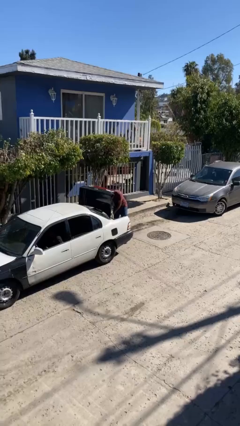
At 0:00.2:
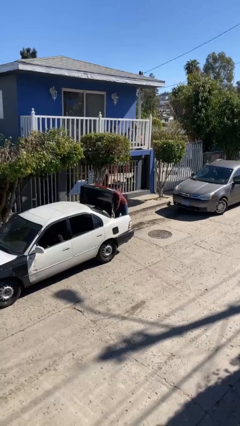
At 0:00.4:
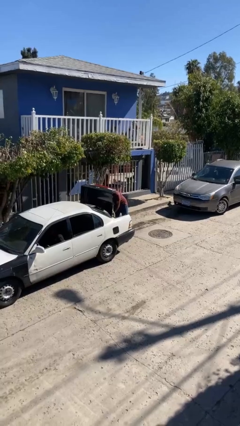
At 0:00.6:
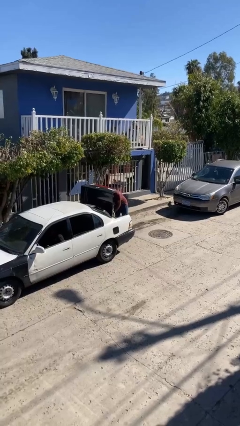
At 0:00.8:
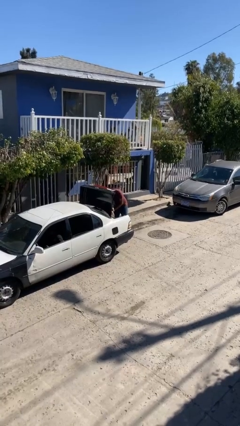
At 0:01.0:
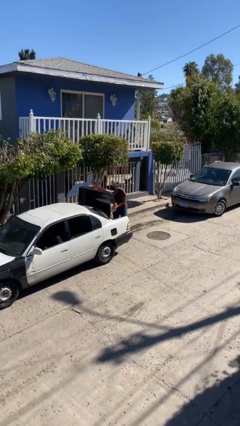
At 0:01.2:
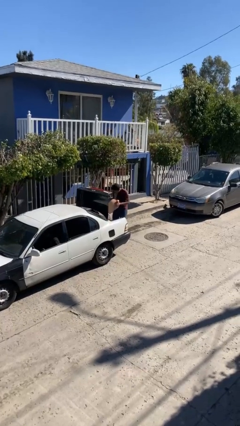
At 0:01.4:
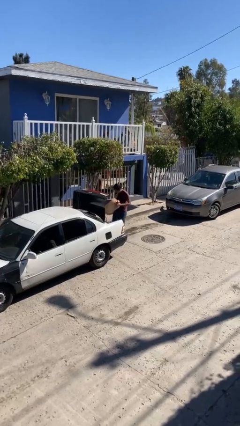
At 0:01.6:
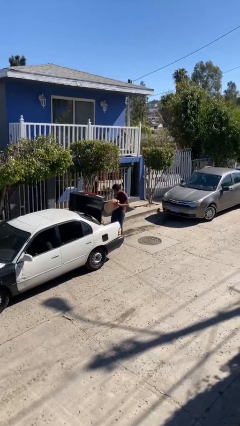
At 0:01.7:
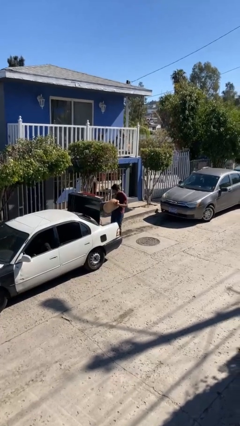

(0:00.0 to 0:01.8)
person unloads car

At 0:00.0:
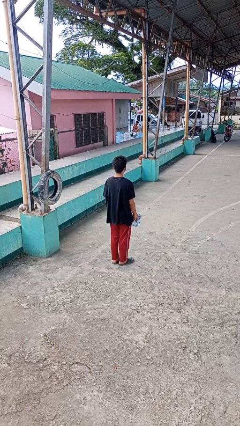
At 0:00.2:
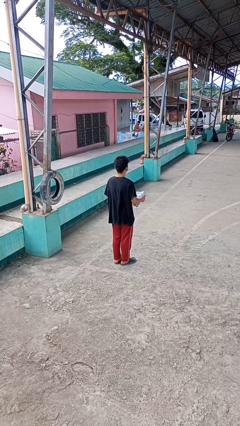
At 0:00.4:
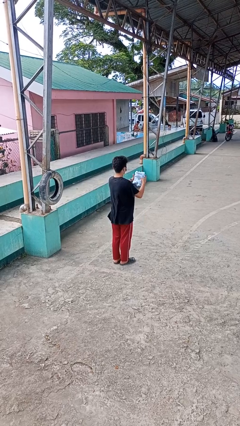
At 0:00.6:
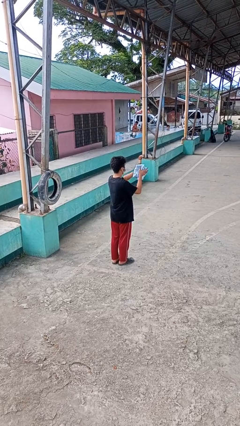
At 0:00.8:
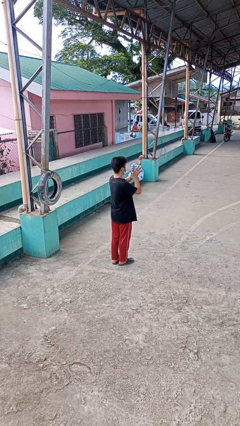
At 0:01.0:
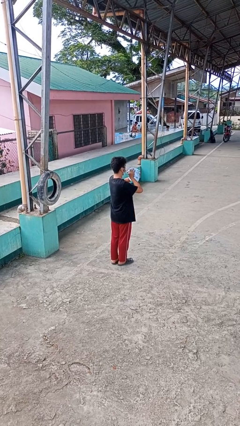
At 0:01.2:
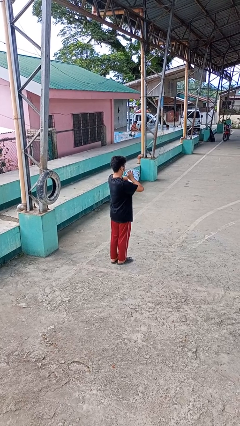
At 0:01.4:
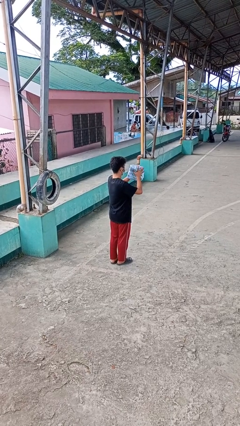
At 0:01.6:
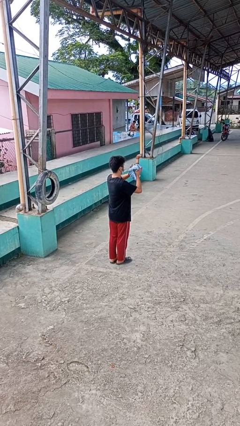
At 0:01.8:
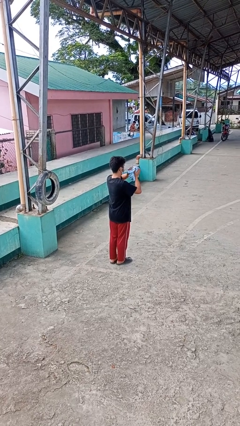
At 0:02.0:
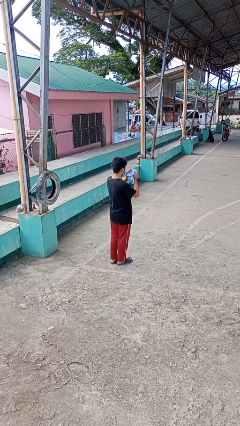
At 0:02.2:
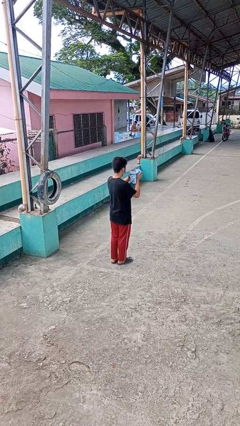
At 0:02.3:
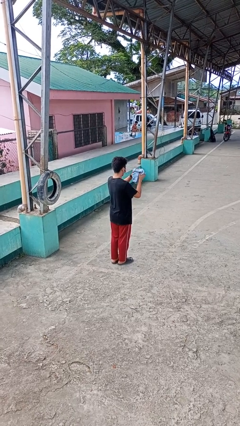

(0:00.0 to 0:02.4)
person squeezes object

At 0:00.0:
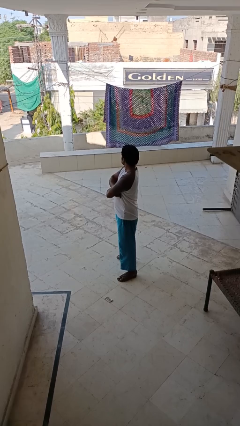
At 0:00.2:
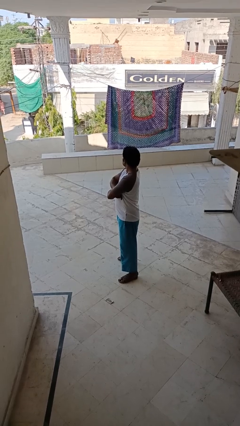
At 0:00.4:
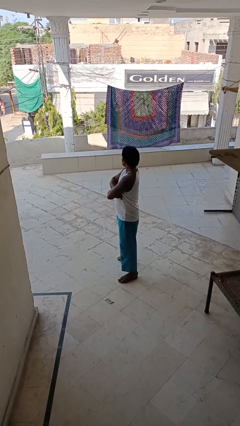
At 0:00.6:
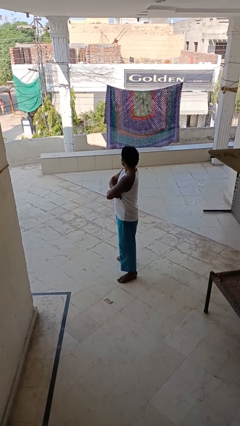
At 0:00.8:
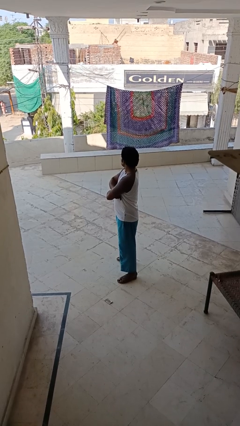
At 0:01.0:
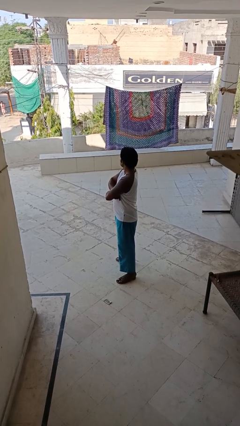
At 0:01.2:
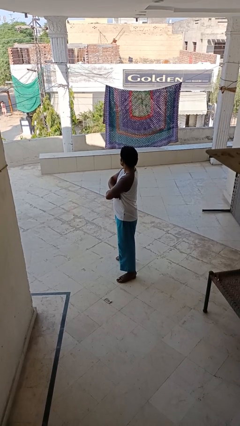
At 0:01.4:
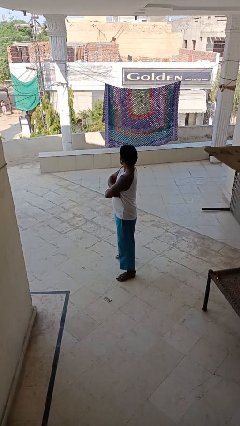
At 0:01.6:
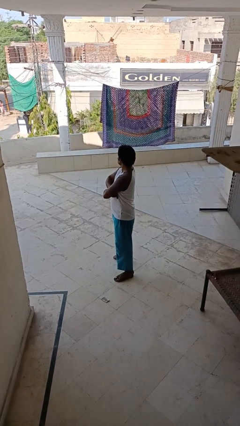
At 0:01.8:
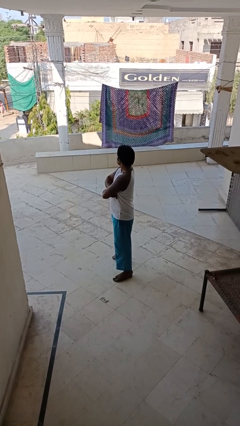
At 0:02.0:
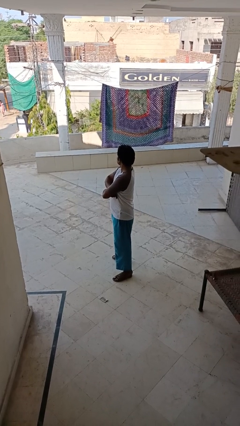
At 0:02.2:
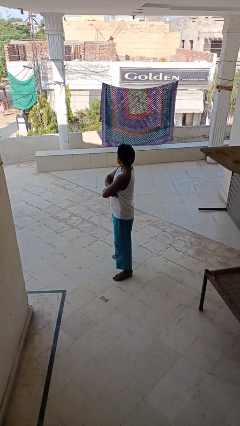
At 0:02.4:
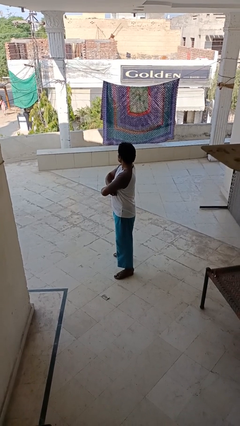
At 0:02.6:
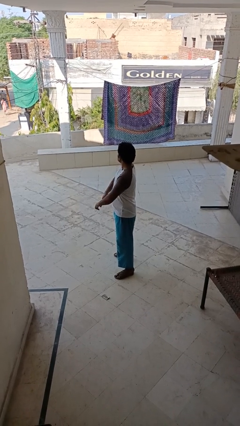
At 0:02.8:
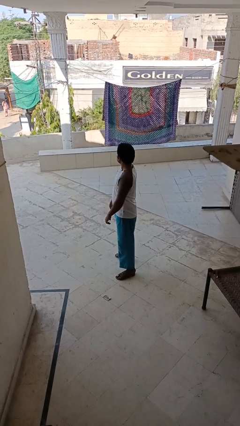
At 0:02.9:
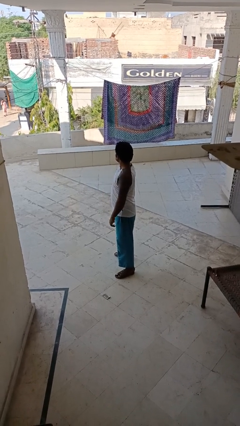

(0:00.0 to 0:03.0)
person crosses arms

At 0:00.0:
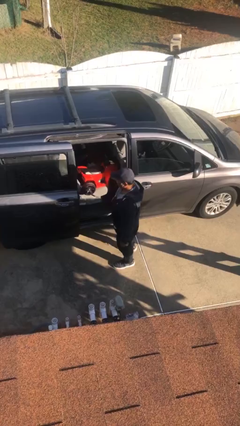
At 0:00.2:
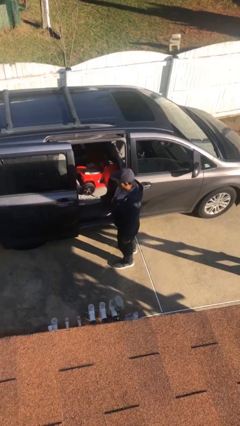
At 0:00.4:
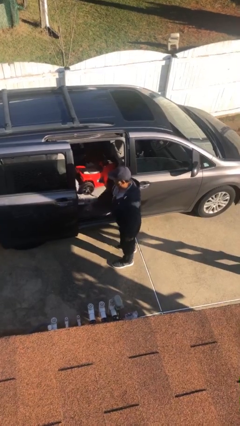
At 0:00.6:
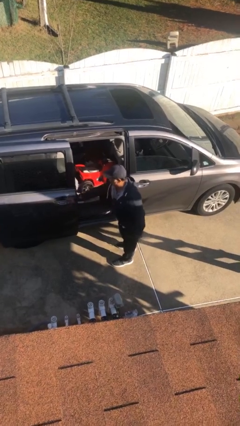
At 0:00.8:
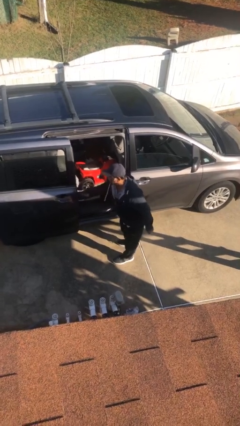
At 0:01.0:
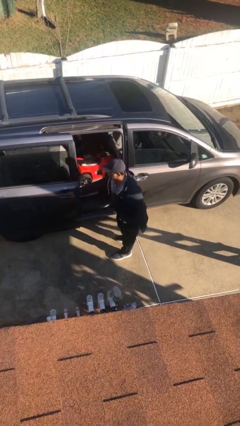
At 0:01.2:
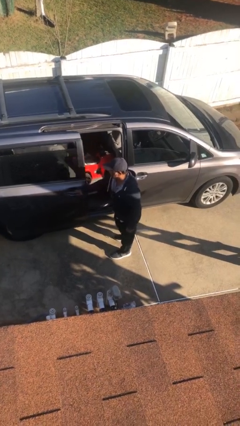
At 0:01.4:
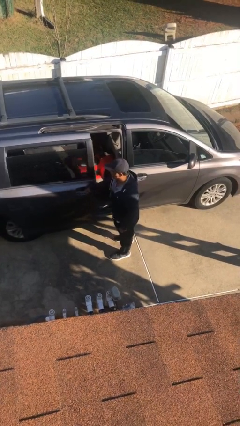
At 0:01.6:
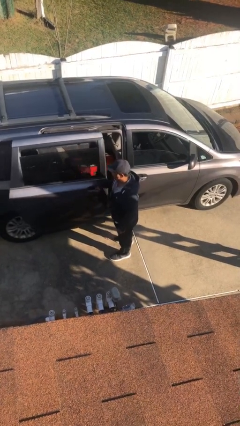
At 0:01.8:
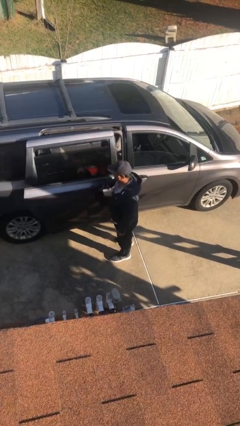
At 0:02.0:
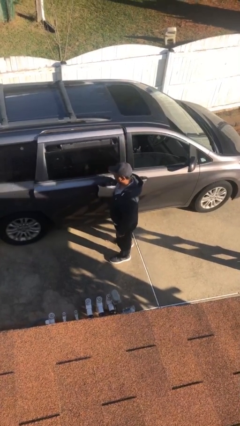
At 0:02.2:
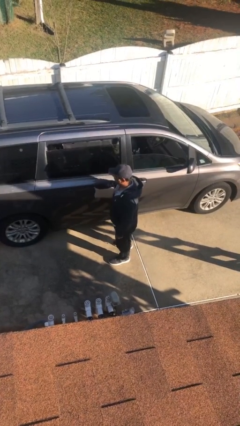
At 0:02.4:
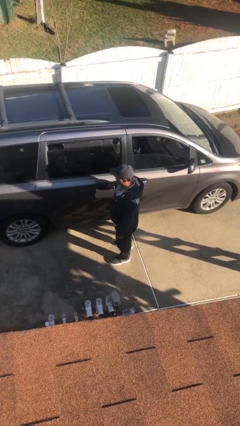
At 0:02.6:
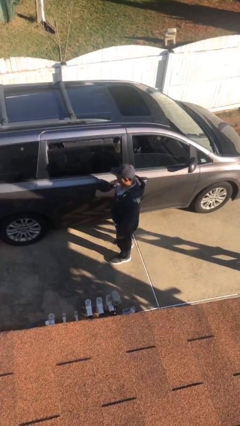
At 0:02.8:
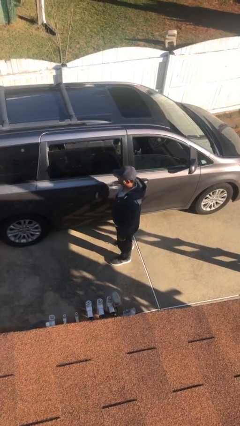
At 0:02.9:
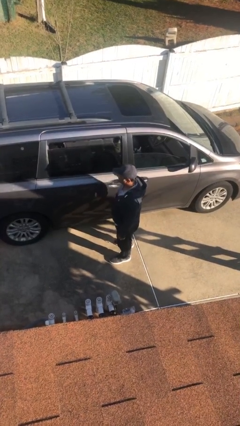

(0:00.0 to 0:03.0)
person closes car door

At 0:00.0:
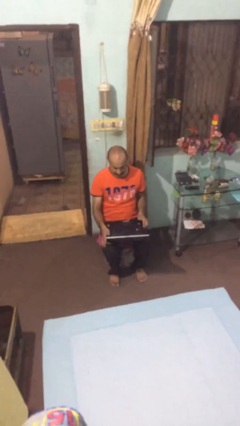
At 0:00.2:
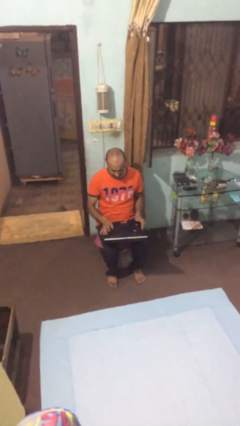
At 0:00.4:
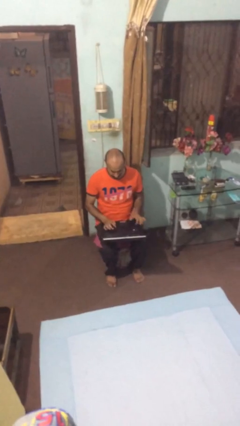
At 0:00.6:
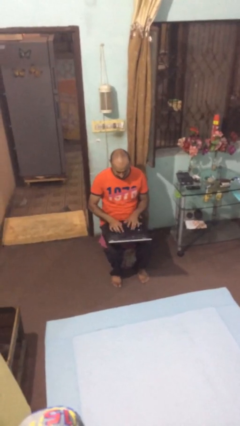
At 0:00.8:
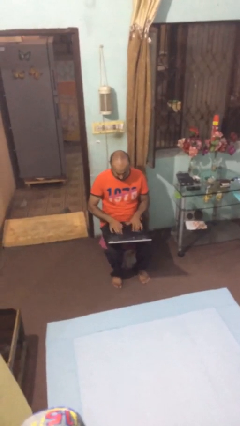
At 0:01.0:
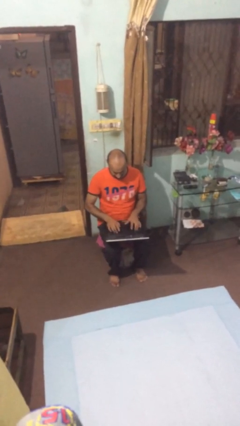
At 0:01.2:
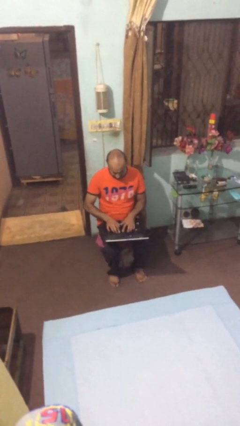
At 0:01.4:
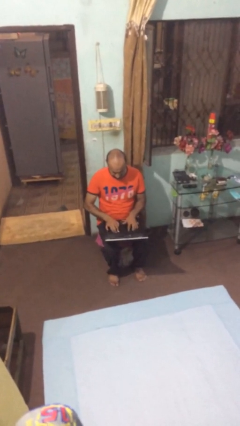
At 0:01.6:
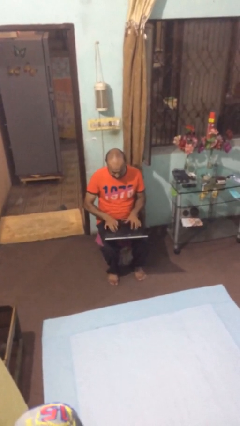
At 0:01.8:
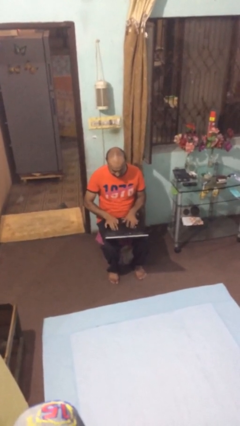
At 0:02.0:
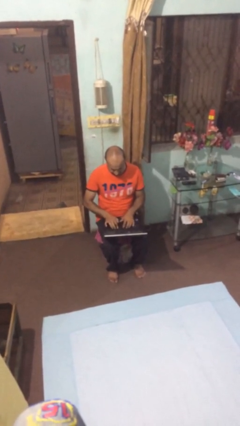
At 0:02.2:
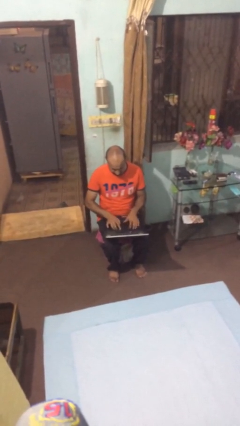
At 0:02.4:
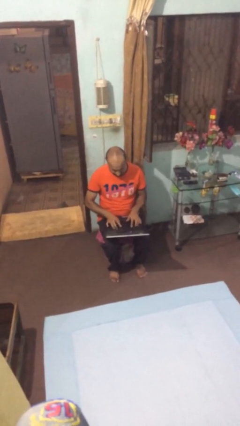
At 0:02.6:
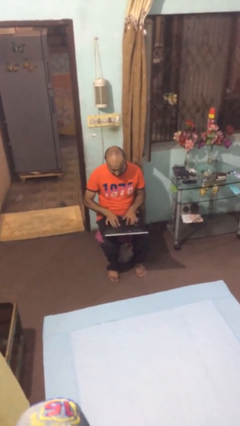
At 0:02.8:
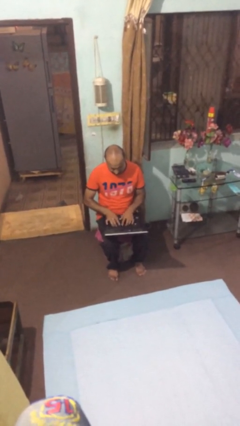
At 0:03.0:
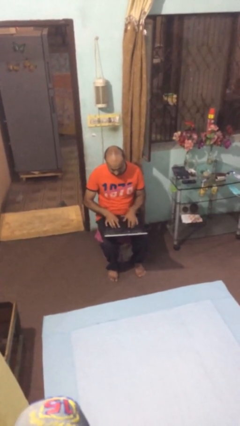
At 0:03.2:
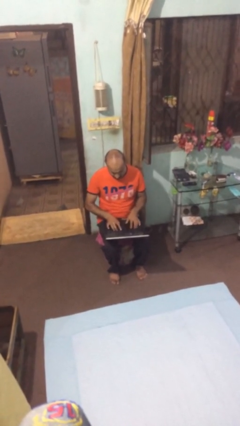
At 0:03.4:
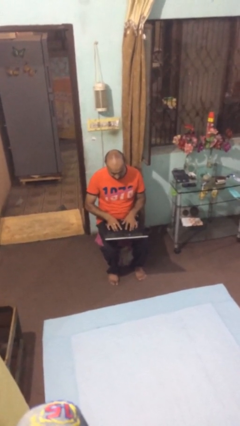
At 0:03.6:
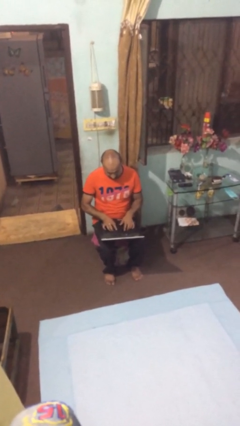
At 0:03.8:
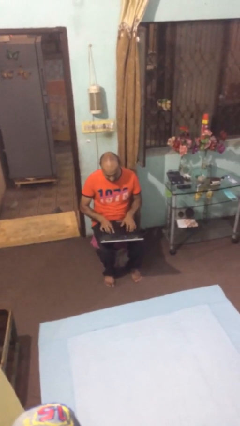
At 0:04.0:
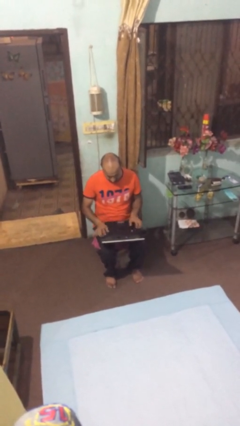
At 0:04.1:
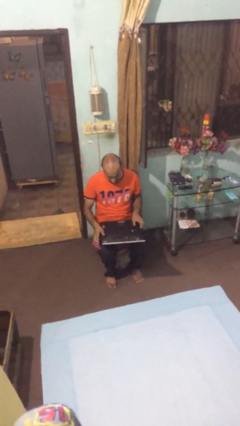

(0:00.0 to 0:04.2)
person interacts with laptop

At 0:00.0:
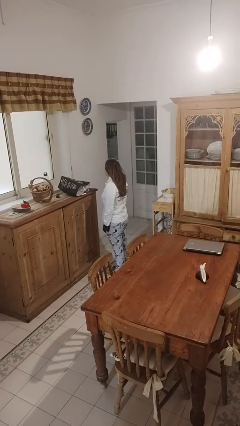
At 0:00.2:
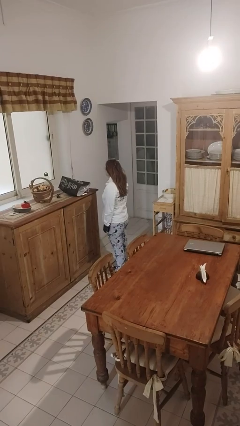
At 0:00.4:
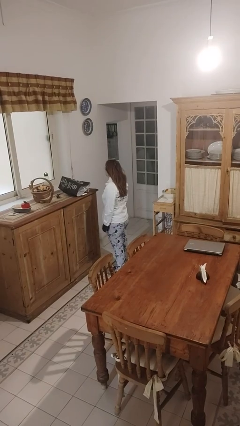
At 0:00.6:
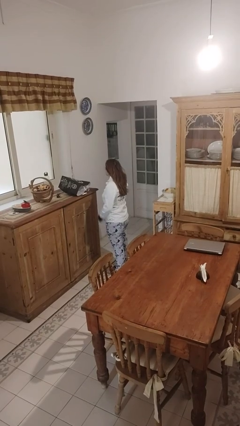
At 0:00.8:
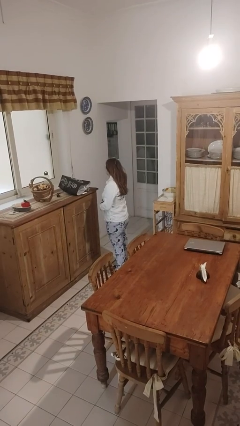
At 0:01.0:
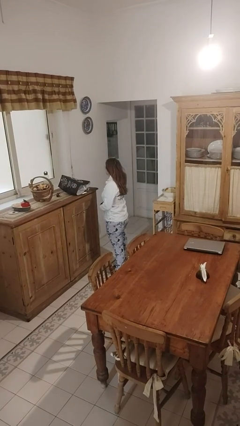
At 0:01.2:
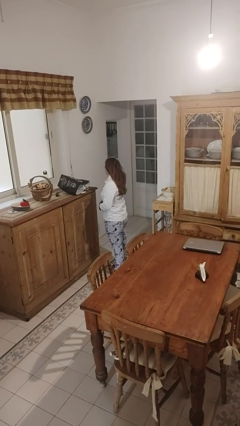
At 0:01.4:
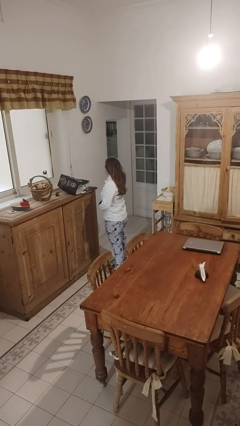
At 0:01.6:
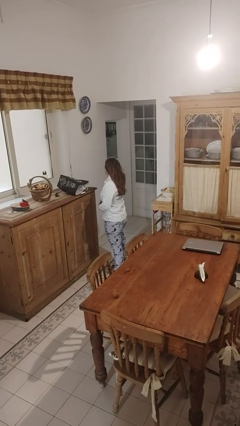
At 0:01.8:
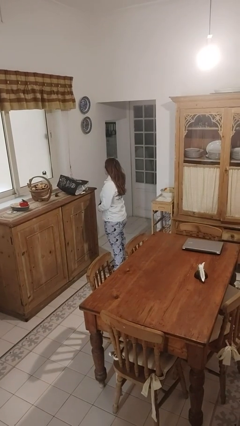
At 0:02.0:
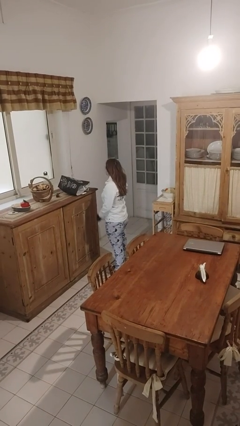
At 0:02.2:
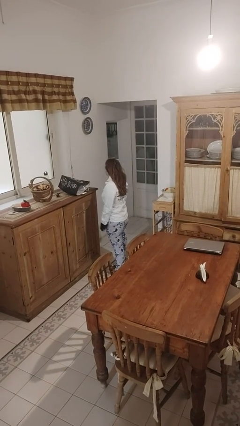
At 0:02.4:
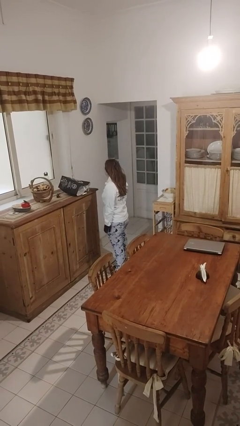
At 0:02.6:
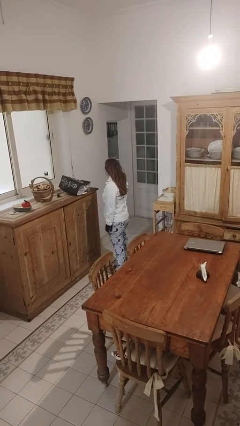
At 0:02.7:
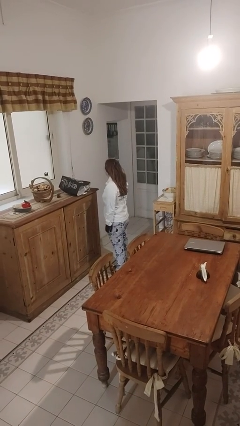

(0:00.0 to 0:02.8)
person unbuttons shirt

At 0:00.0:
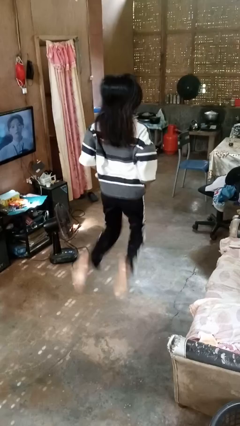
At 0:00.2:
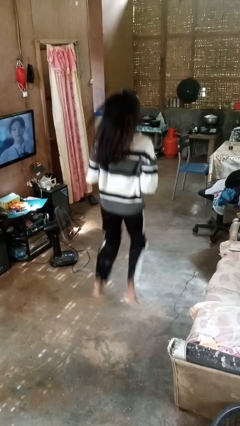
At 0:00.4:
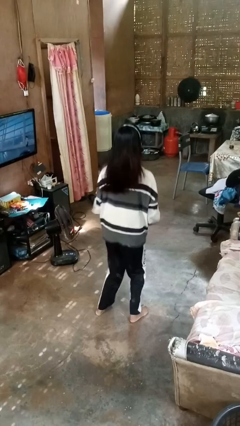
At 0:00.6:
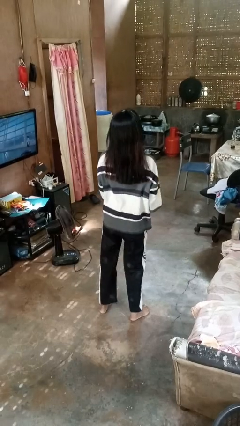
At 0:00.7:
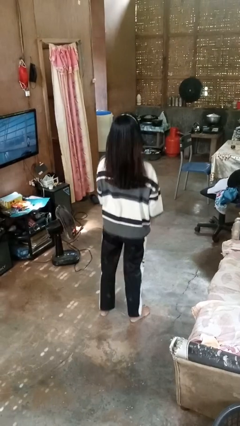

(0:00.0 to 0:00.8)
person jumps
